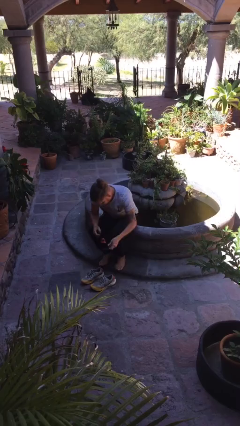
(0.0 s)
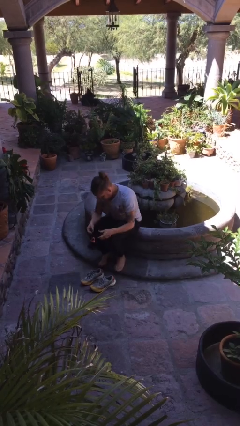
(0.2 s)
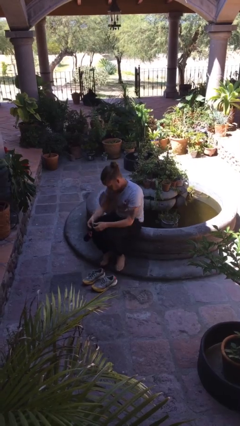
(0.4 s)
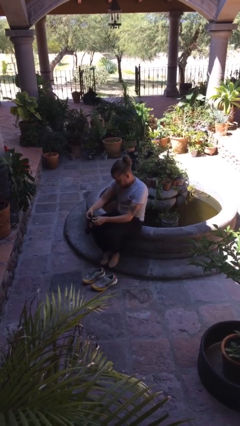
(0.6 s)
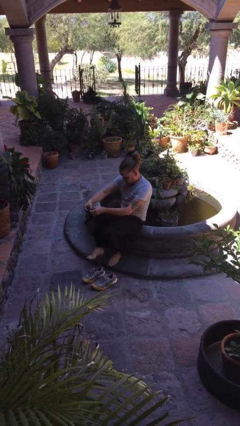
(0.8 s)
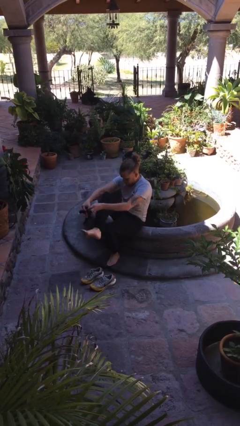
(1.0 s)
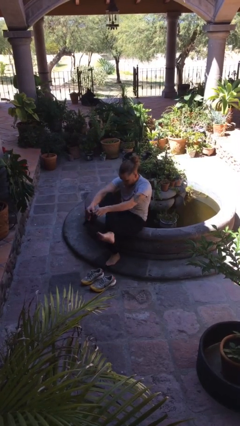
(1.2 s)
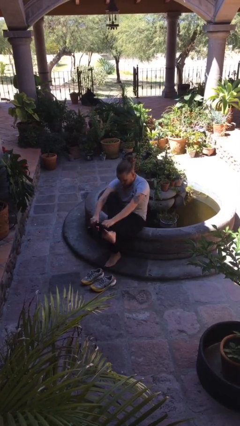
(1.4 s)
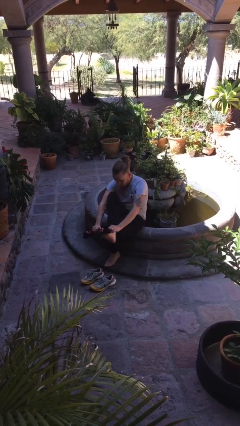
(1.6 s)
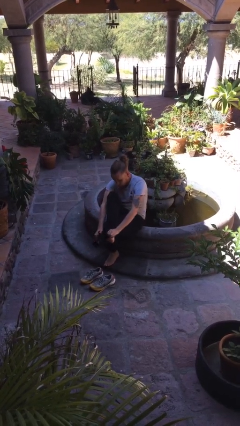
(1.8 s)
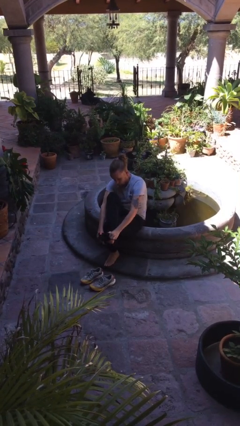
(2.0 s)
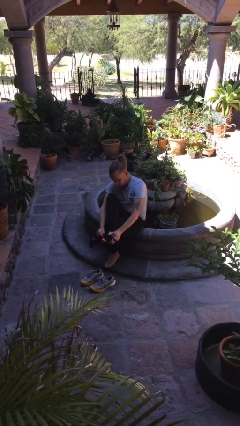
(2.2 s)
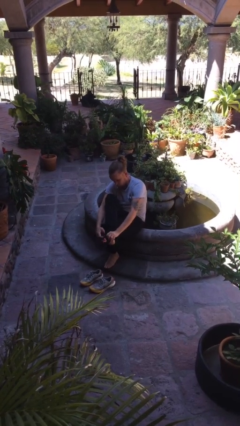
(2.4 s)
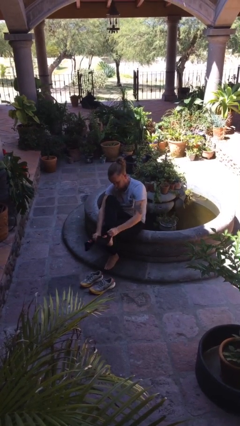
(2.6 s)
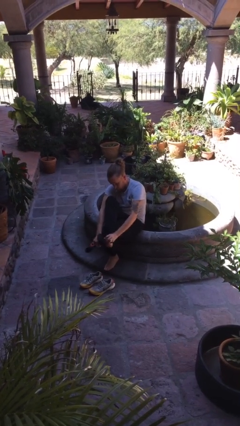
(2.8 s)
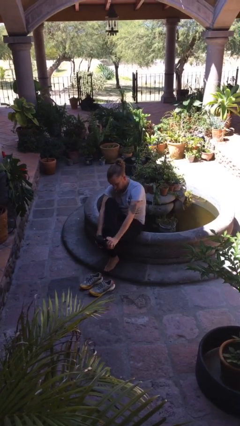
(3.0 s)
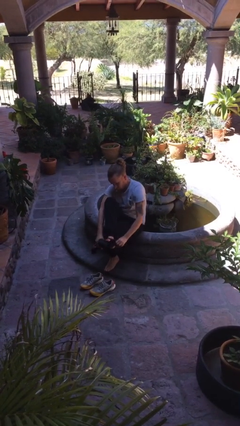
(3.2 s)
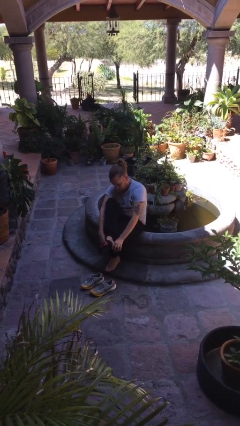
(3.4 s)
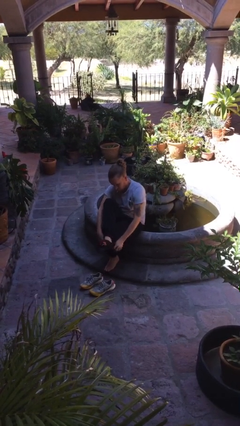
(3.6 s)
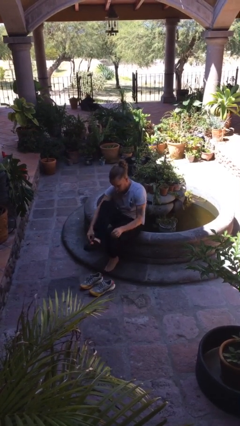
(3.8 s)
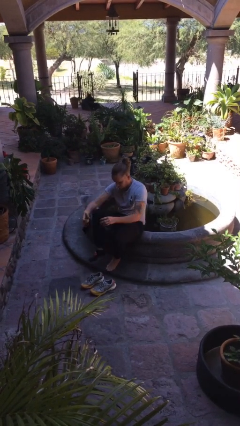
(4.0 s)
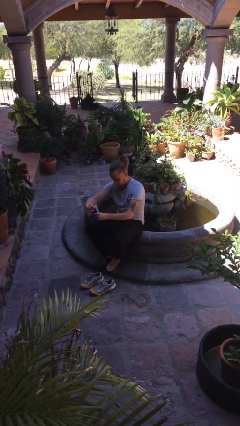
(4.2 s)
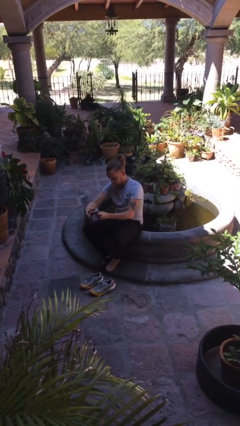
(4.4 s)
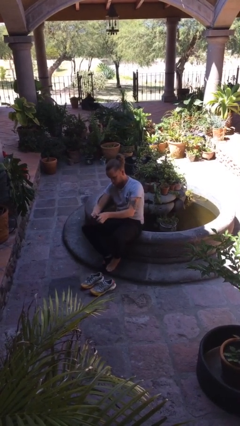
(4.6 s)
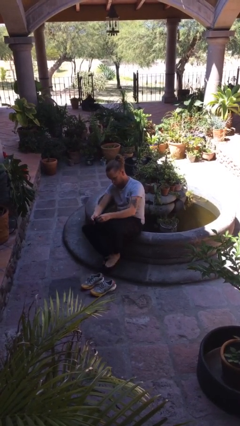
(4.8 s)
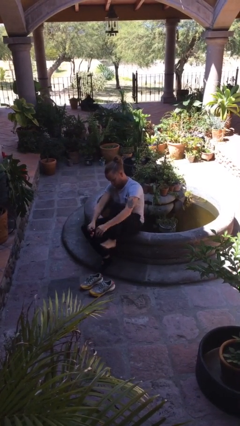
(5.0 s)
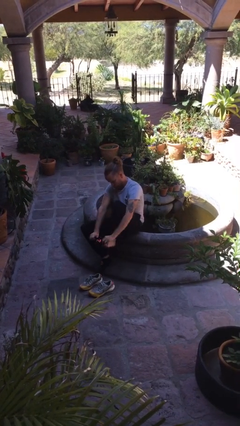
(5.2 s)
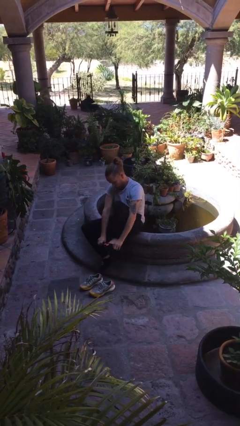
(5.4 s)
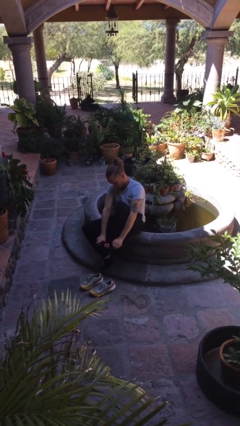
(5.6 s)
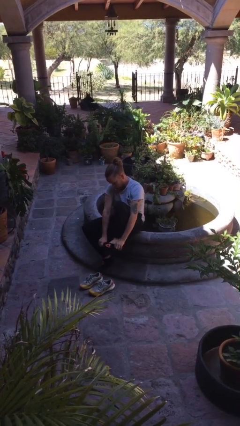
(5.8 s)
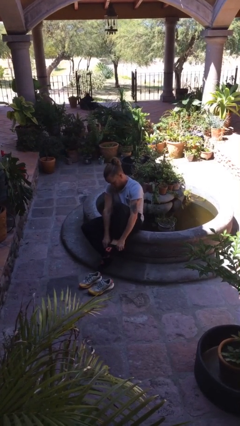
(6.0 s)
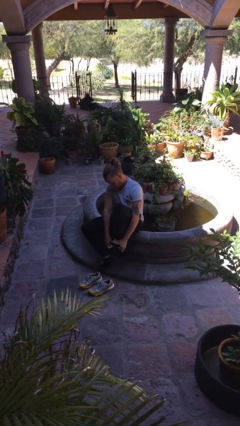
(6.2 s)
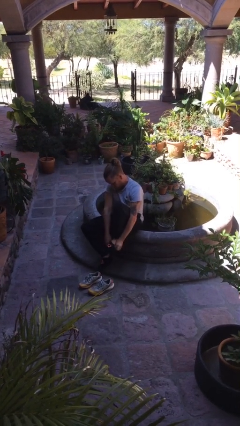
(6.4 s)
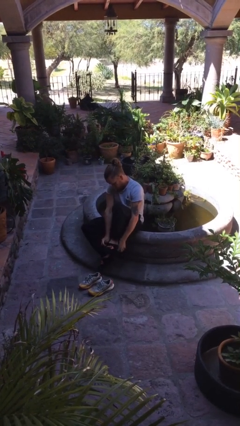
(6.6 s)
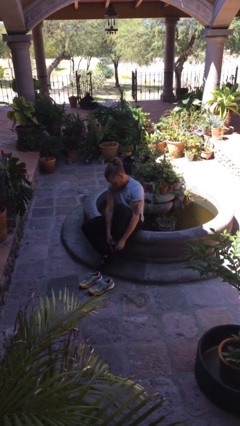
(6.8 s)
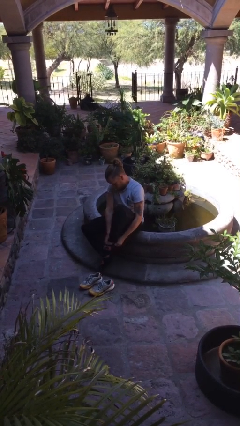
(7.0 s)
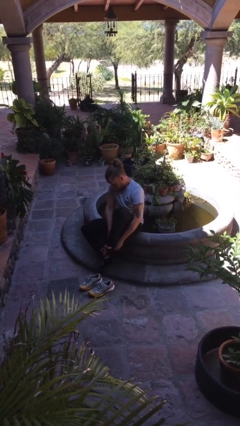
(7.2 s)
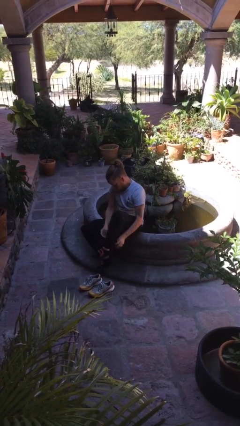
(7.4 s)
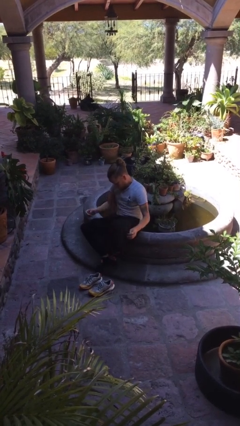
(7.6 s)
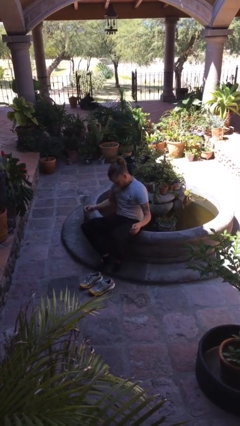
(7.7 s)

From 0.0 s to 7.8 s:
person puts on socks

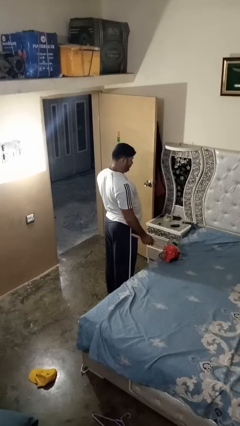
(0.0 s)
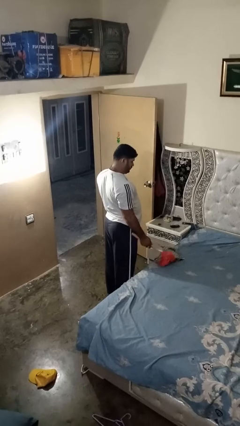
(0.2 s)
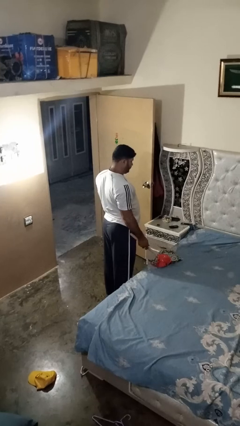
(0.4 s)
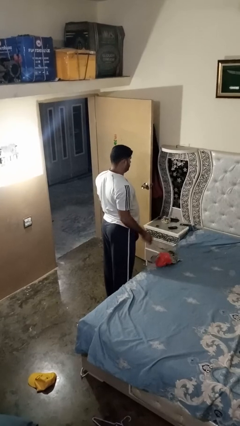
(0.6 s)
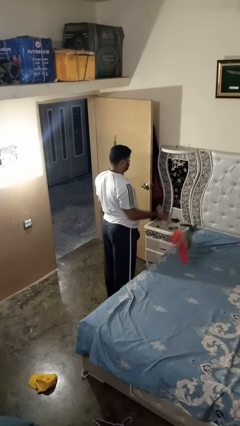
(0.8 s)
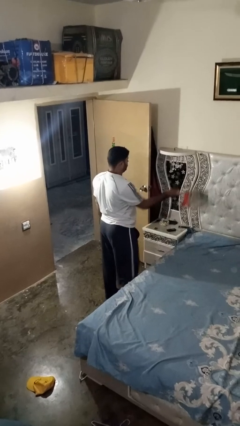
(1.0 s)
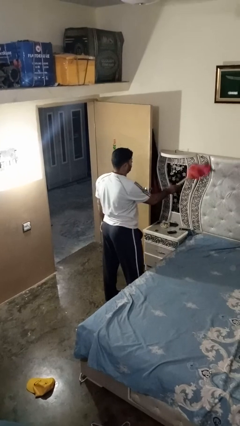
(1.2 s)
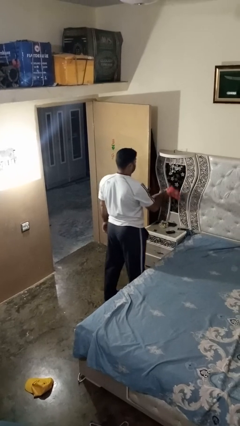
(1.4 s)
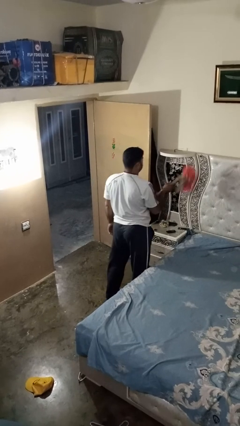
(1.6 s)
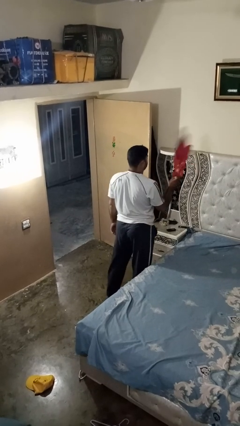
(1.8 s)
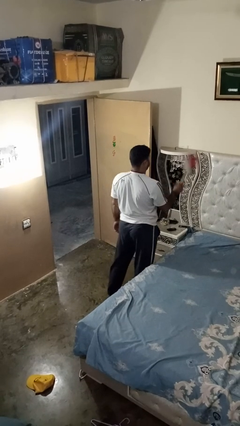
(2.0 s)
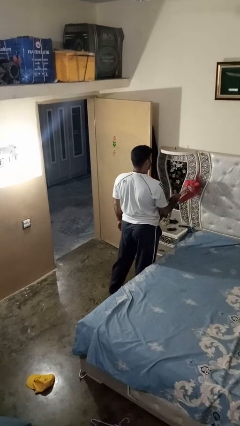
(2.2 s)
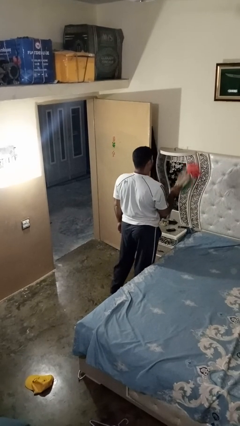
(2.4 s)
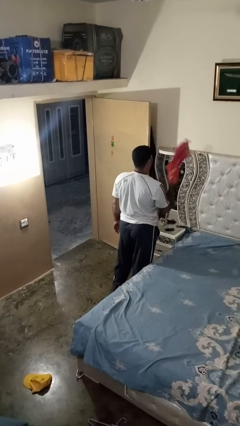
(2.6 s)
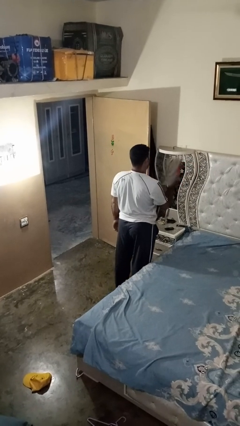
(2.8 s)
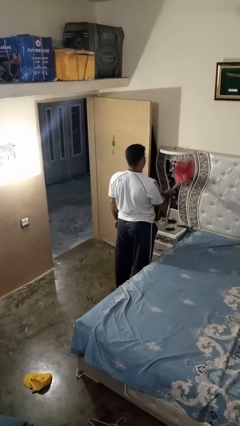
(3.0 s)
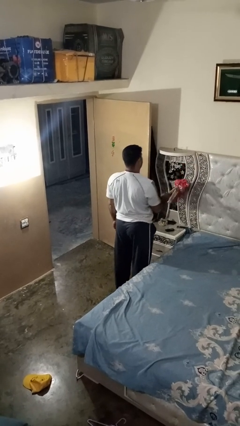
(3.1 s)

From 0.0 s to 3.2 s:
person dusts furniture

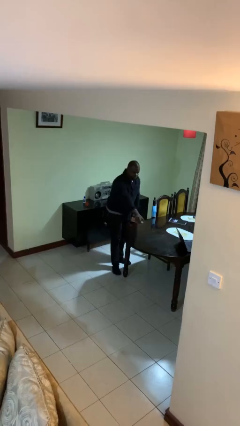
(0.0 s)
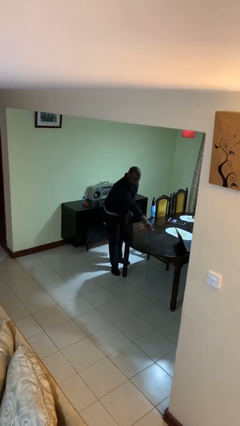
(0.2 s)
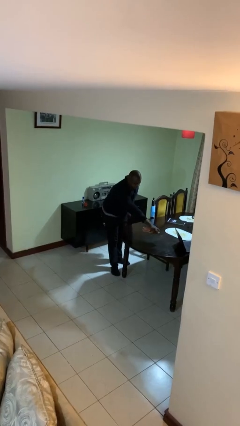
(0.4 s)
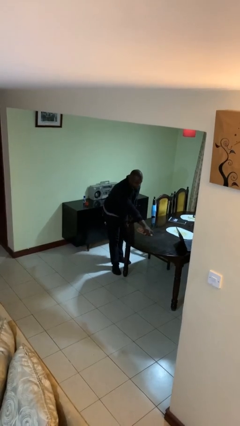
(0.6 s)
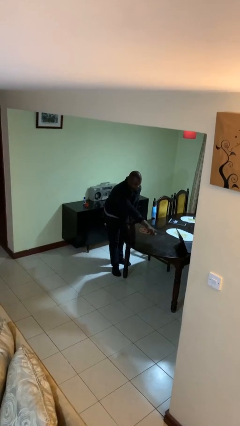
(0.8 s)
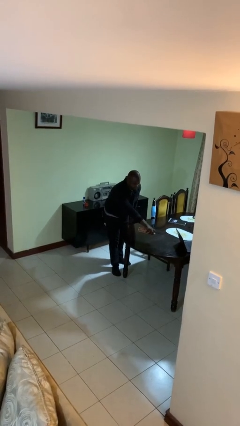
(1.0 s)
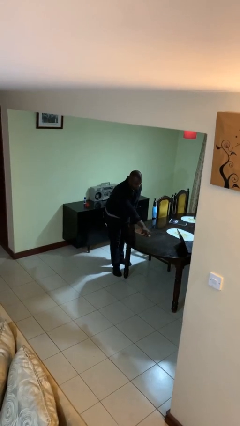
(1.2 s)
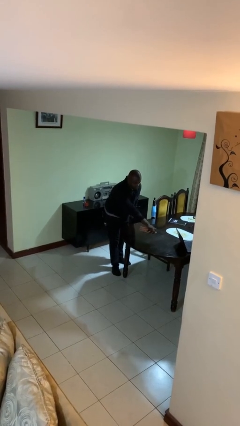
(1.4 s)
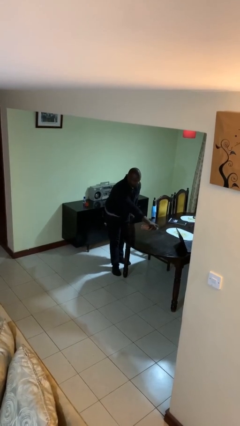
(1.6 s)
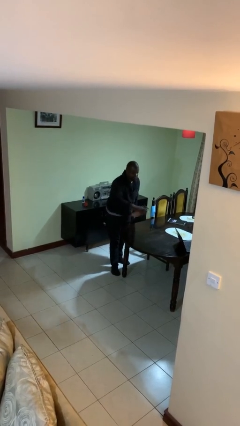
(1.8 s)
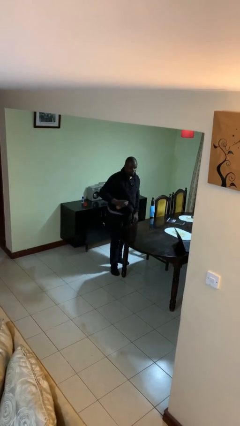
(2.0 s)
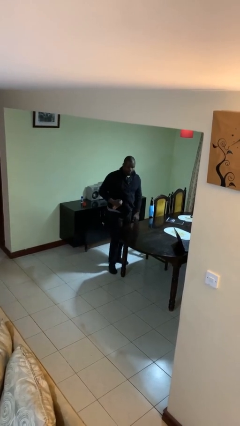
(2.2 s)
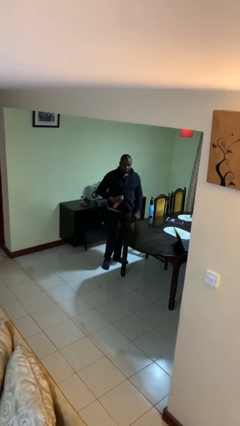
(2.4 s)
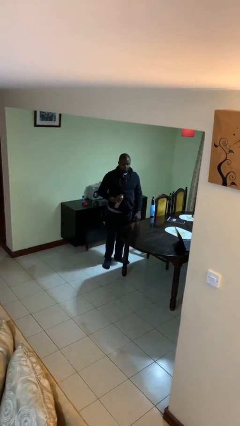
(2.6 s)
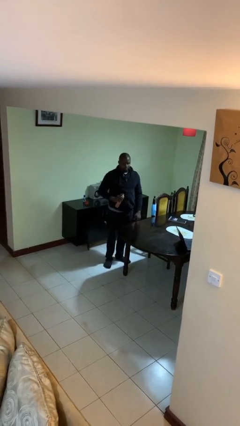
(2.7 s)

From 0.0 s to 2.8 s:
person sprays from bottle

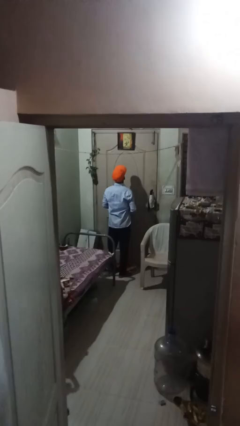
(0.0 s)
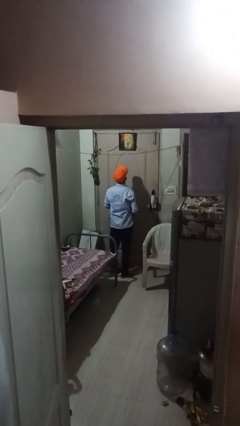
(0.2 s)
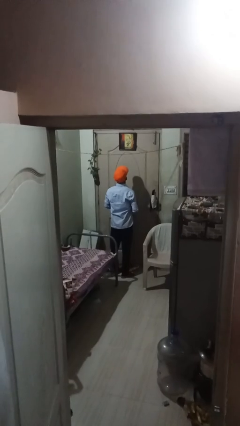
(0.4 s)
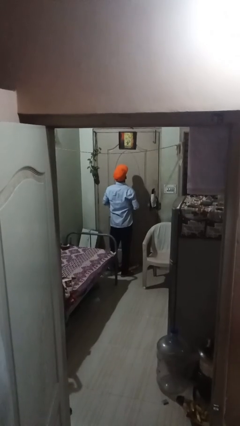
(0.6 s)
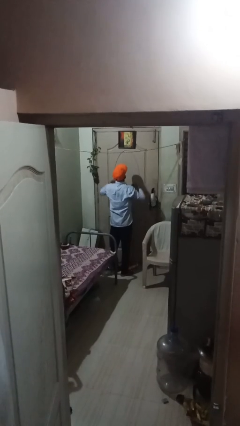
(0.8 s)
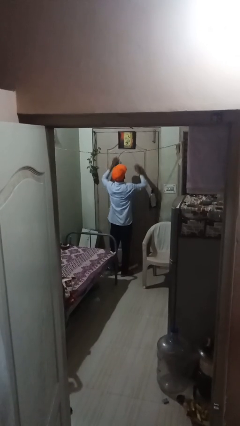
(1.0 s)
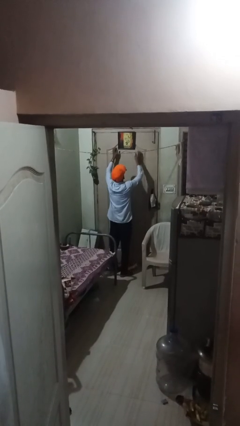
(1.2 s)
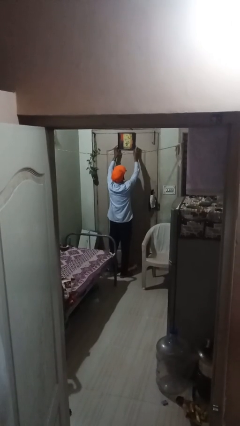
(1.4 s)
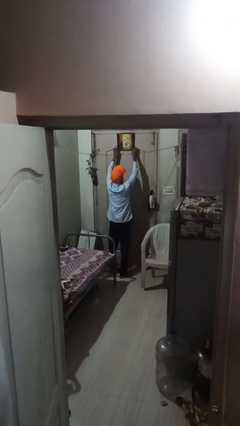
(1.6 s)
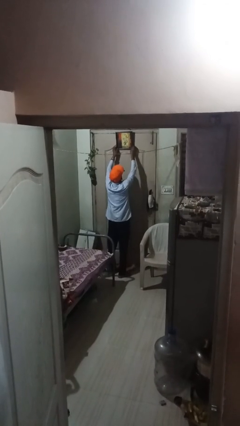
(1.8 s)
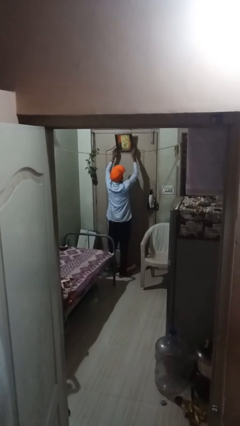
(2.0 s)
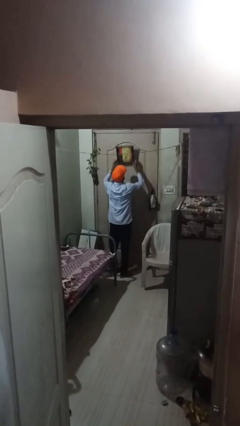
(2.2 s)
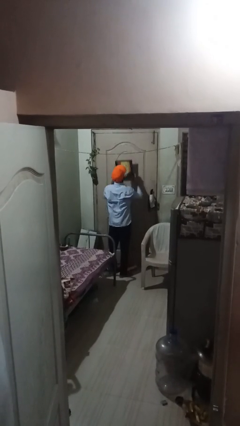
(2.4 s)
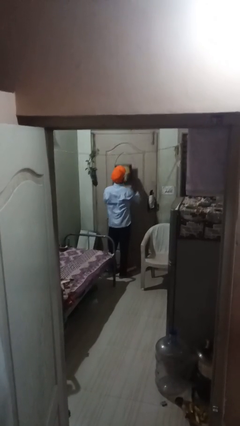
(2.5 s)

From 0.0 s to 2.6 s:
person takes down picture frame

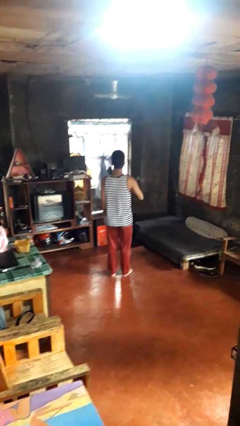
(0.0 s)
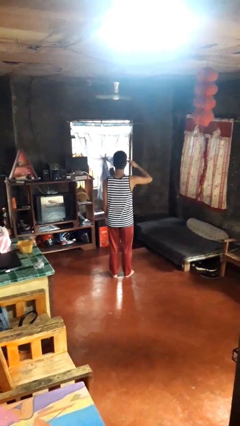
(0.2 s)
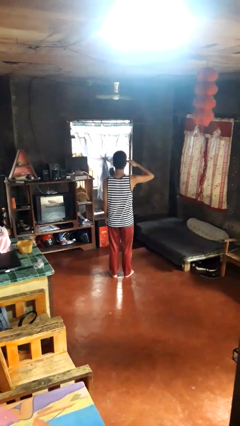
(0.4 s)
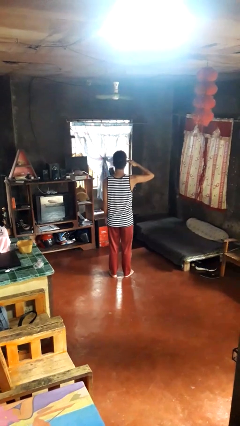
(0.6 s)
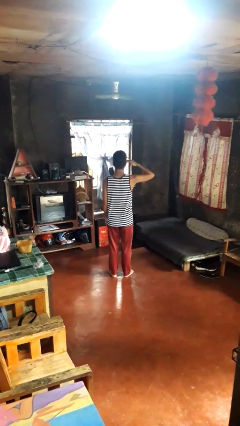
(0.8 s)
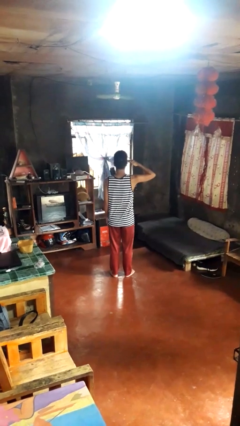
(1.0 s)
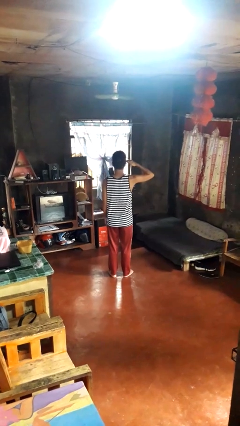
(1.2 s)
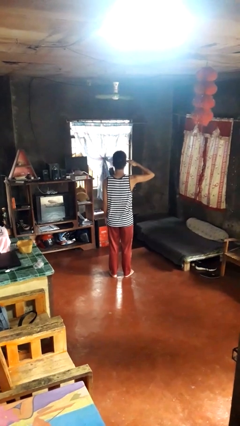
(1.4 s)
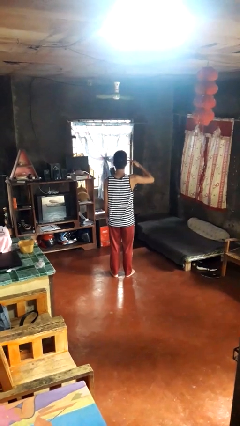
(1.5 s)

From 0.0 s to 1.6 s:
person salutes
